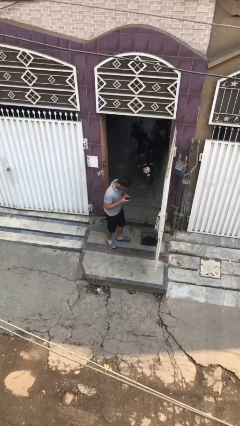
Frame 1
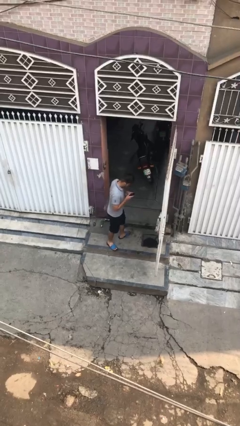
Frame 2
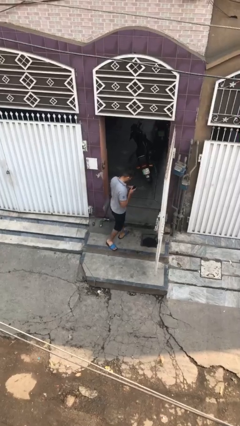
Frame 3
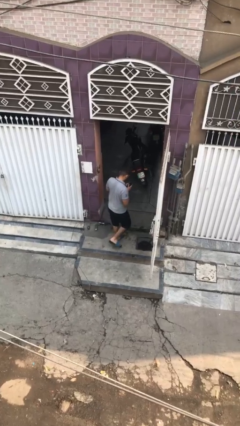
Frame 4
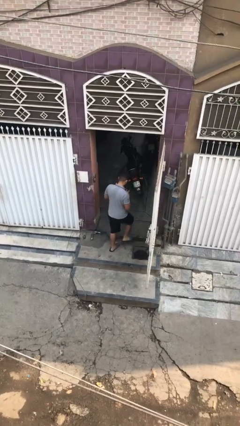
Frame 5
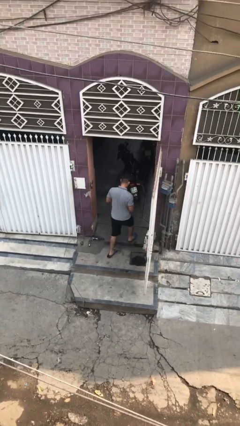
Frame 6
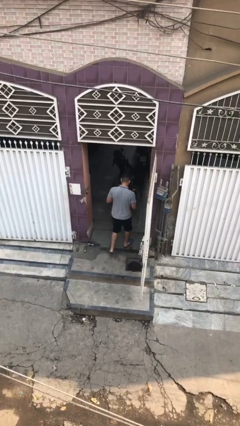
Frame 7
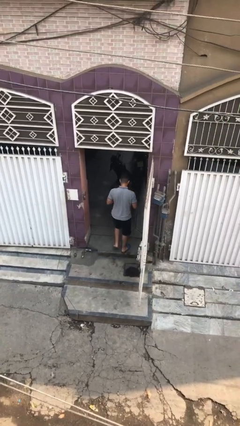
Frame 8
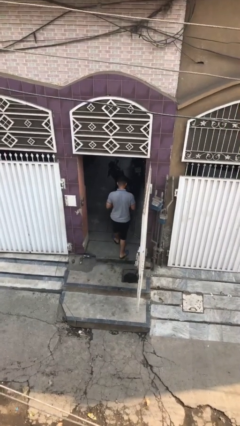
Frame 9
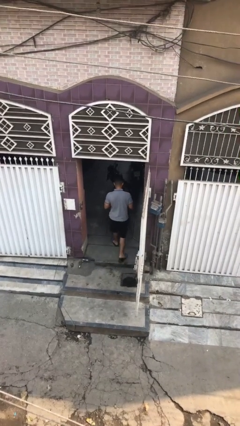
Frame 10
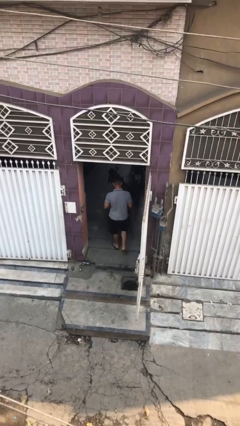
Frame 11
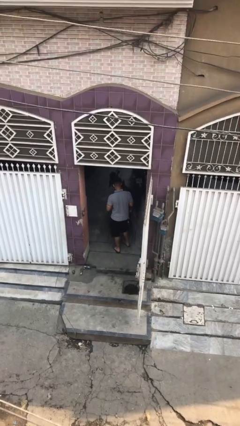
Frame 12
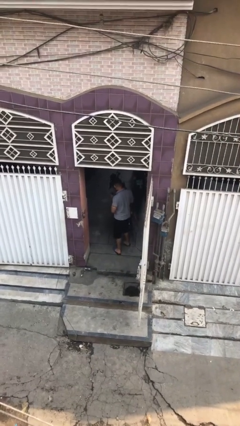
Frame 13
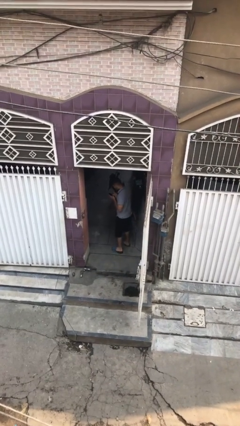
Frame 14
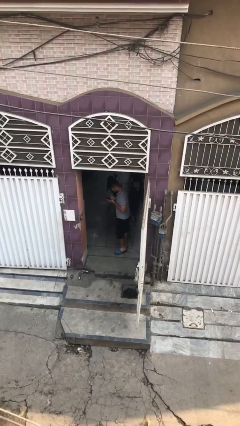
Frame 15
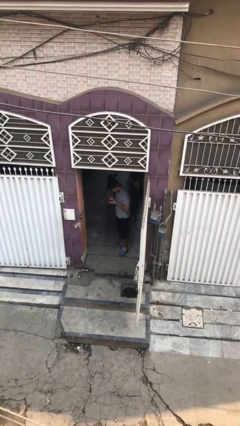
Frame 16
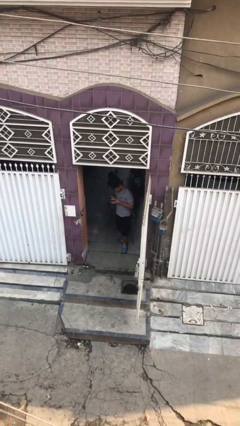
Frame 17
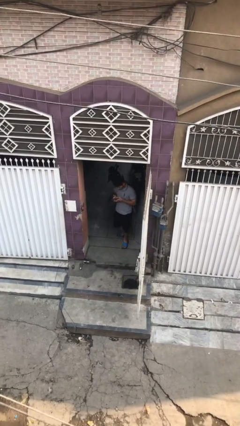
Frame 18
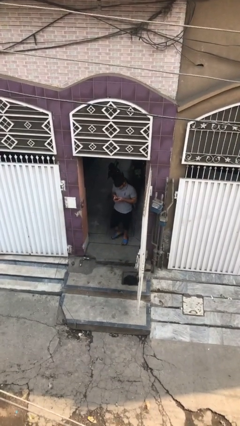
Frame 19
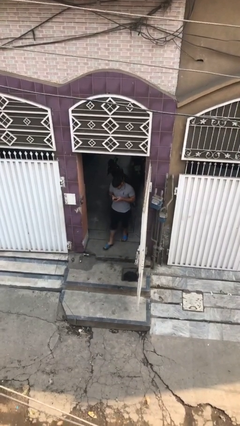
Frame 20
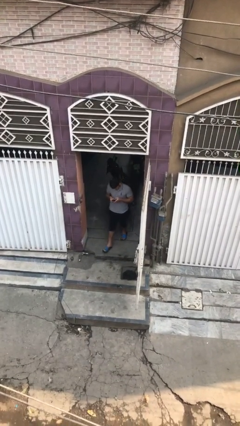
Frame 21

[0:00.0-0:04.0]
person exits scene through structure

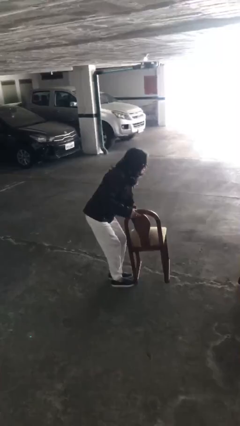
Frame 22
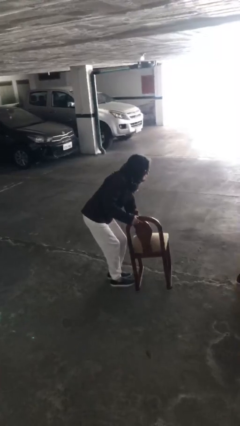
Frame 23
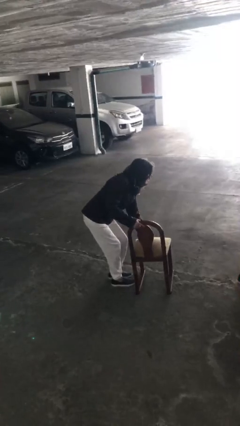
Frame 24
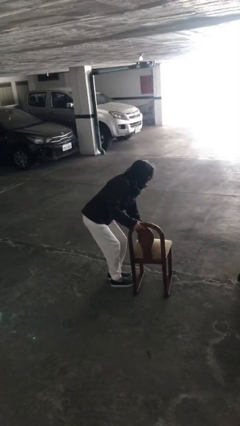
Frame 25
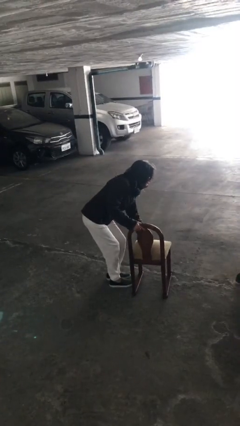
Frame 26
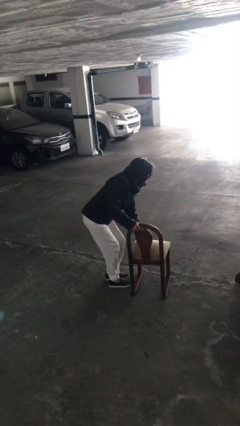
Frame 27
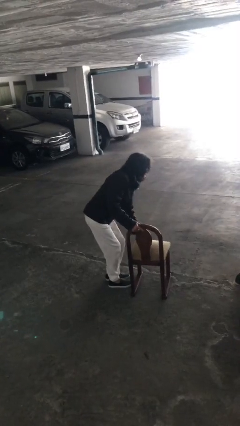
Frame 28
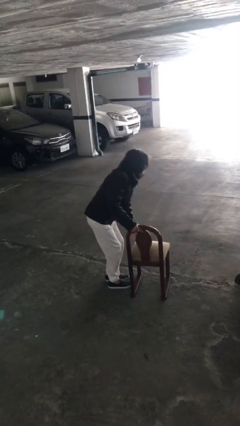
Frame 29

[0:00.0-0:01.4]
person puts down object on floor

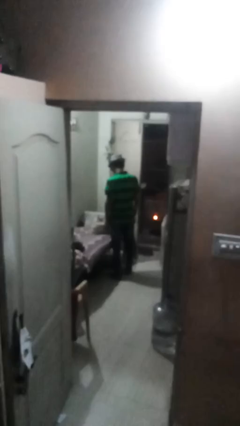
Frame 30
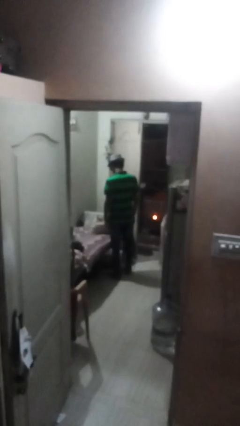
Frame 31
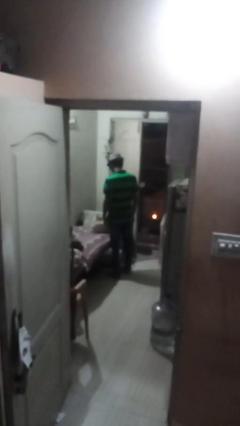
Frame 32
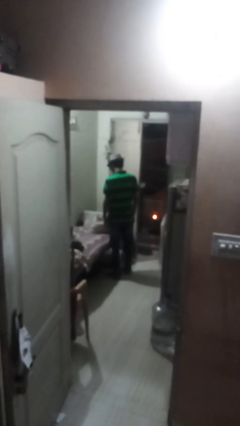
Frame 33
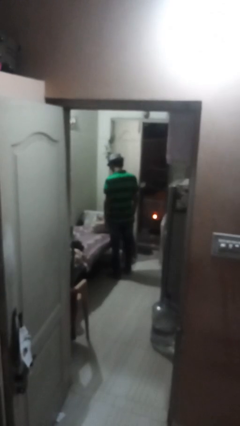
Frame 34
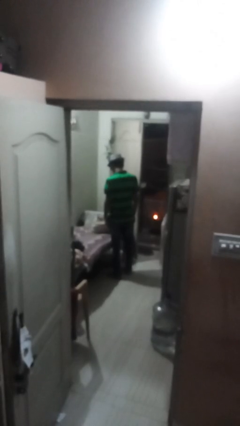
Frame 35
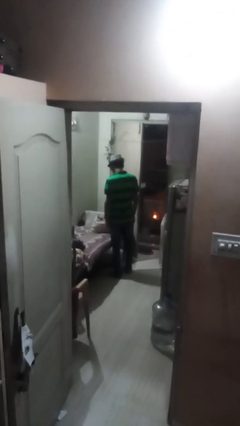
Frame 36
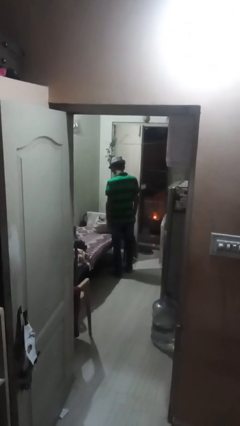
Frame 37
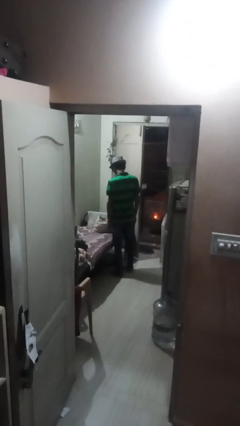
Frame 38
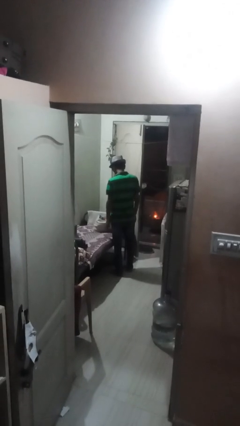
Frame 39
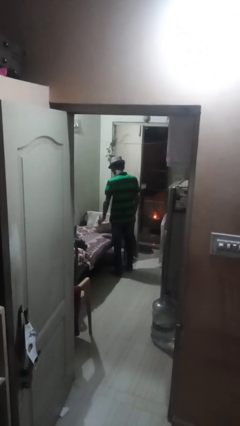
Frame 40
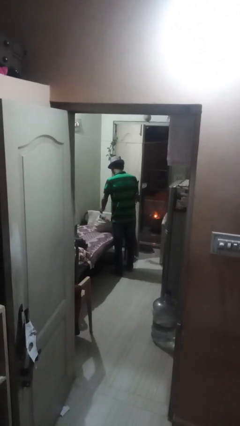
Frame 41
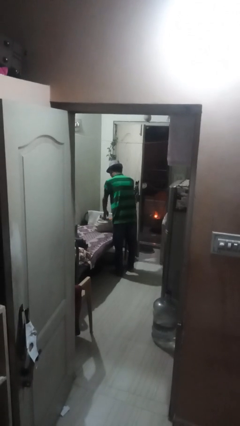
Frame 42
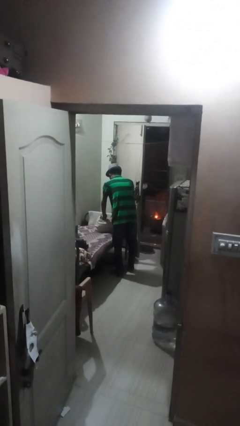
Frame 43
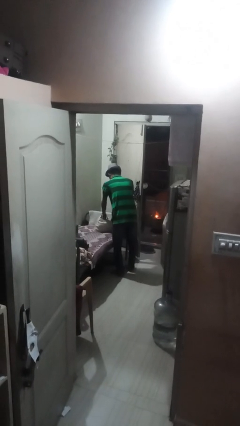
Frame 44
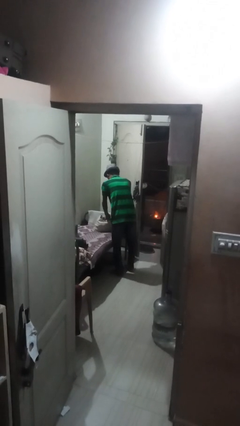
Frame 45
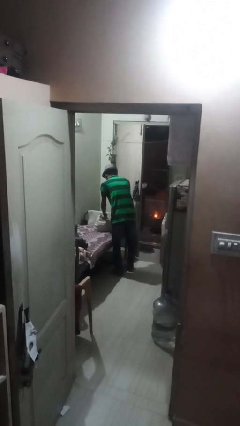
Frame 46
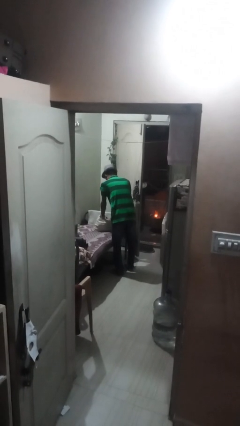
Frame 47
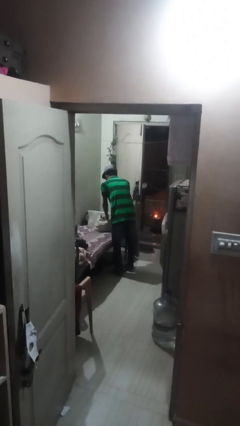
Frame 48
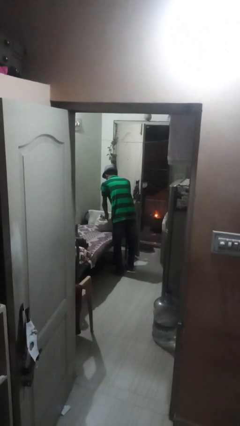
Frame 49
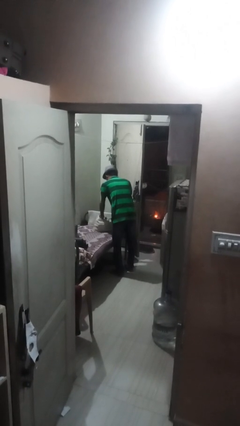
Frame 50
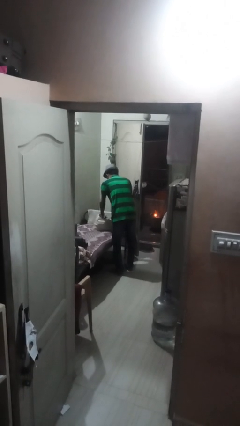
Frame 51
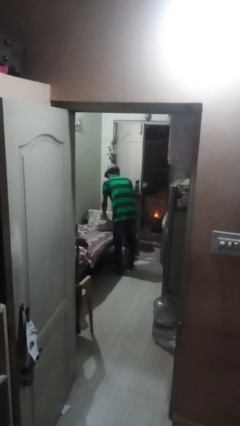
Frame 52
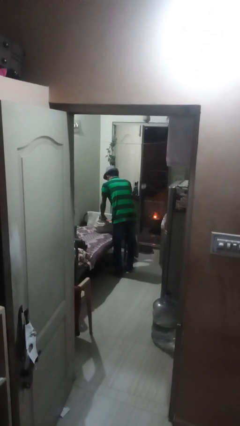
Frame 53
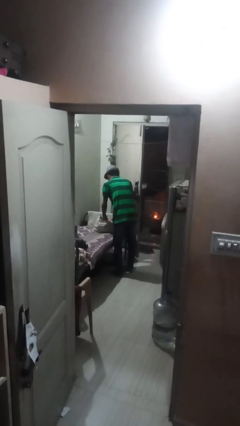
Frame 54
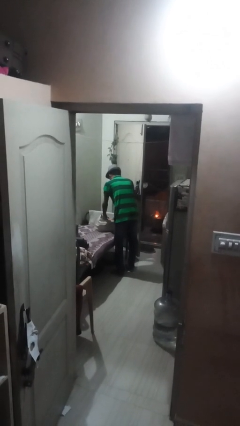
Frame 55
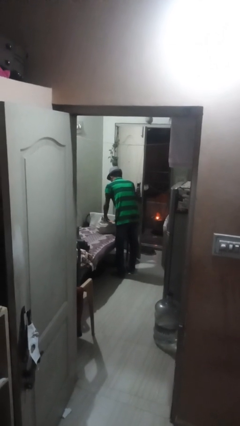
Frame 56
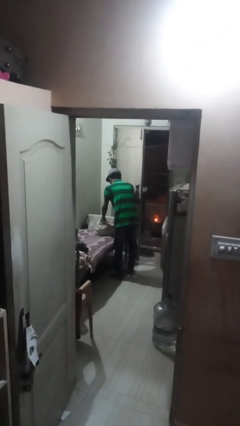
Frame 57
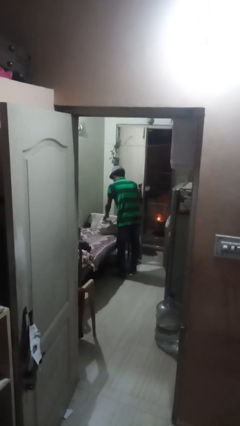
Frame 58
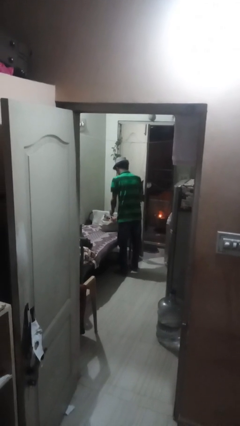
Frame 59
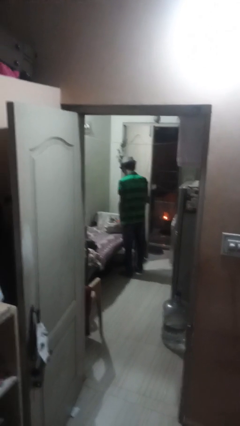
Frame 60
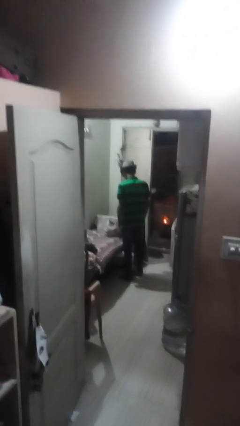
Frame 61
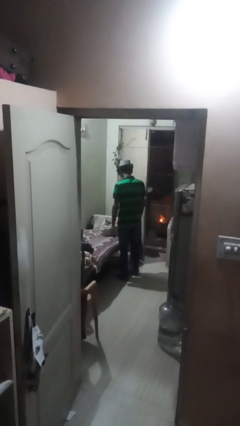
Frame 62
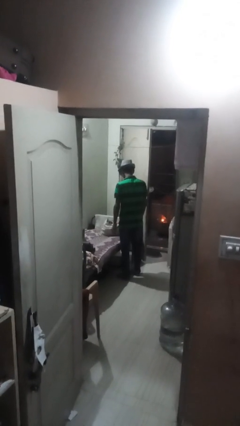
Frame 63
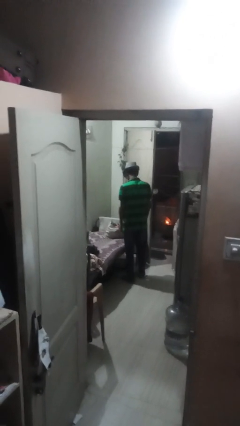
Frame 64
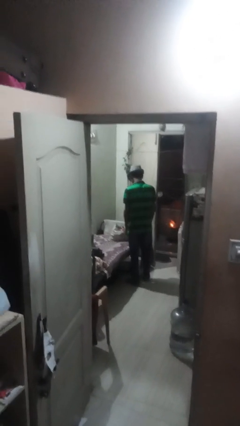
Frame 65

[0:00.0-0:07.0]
person searches in bag

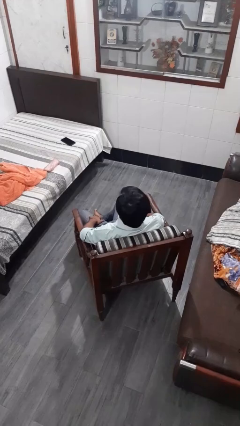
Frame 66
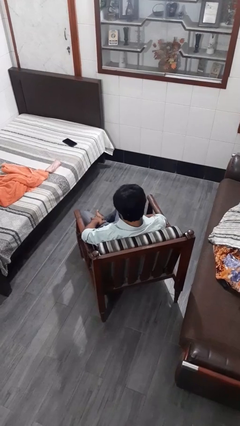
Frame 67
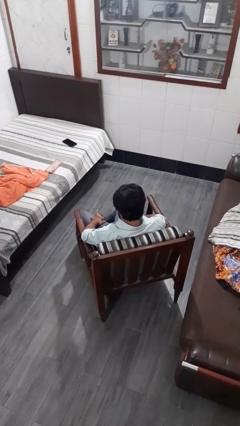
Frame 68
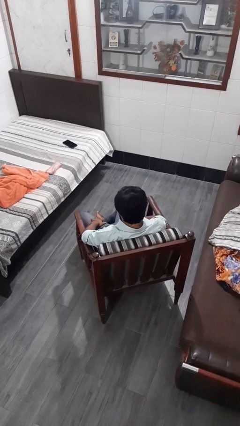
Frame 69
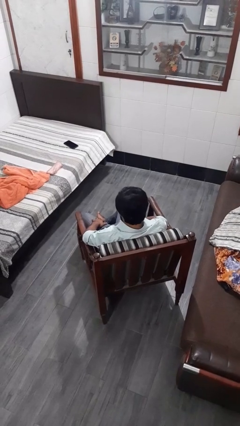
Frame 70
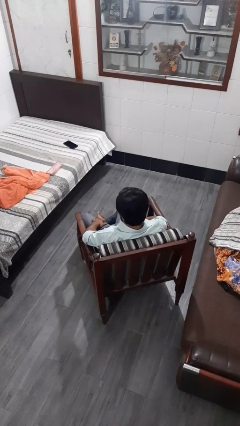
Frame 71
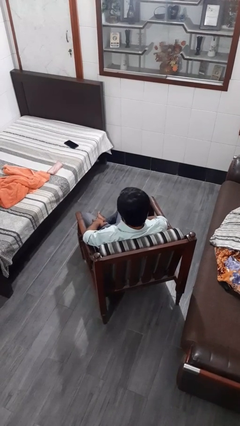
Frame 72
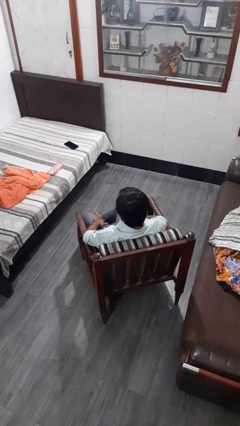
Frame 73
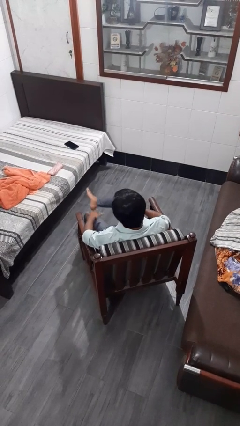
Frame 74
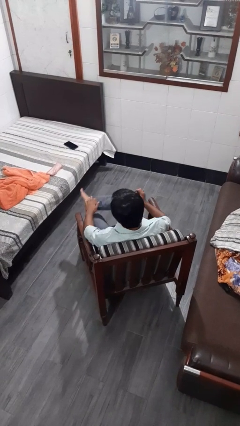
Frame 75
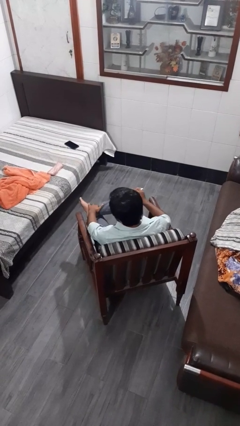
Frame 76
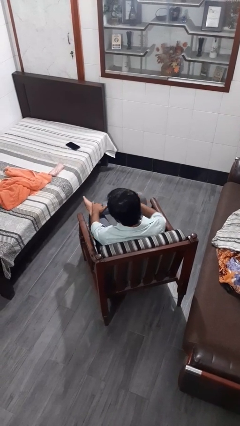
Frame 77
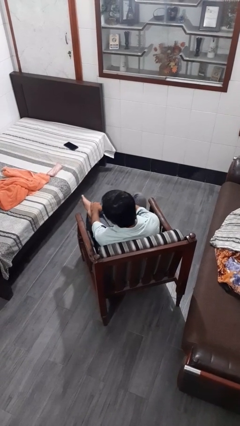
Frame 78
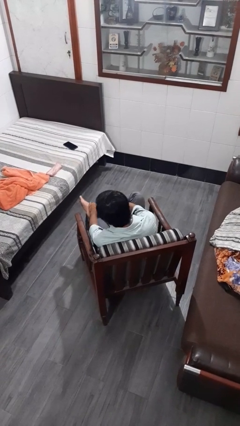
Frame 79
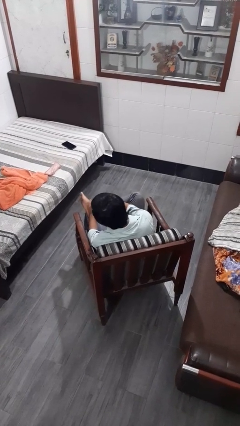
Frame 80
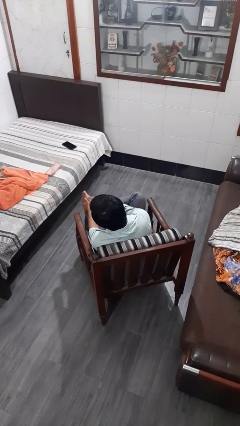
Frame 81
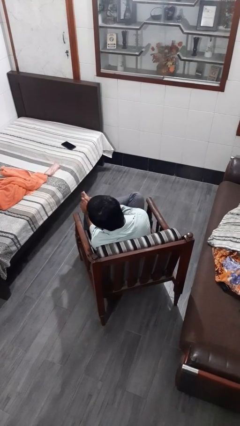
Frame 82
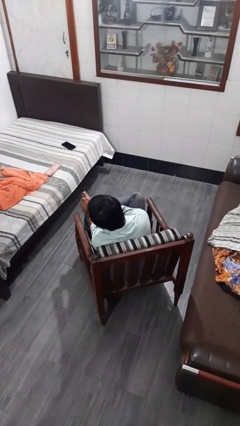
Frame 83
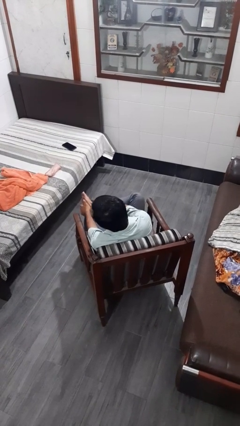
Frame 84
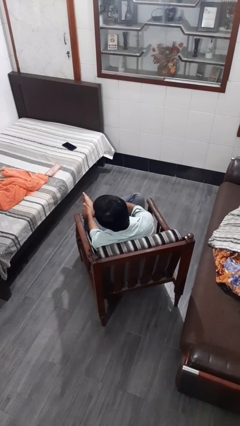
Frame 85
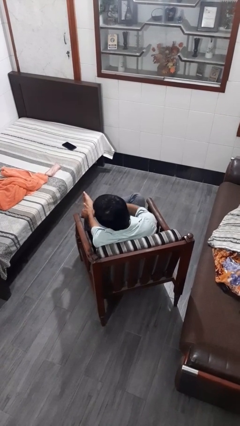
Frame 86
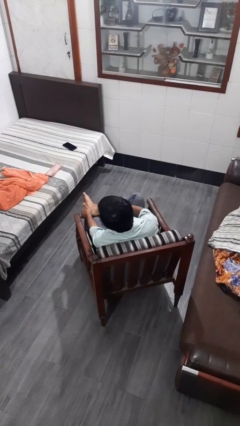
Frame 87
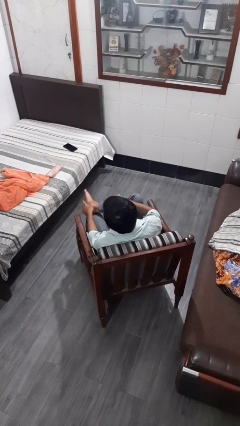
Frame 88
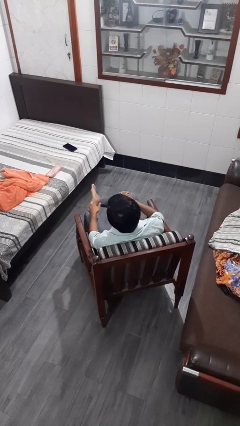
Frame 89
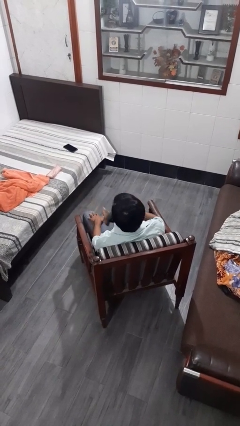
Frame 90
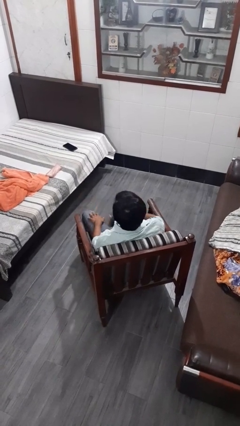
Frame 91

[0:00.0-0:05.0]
person rubs foot

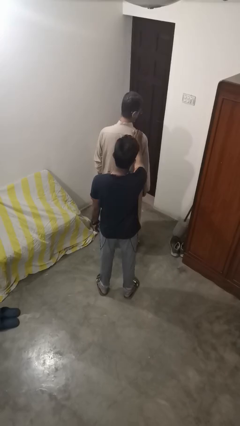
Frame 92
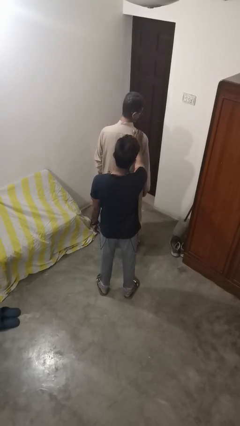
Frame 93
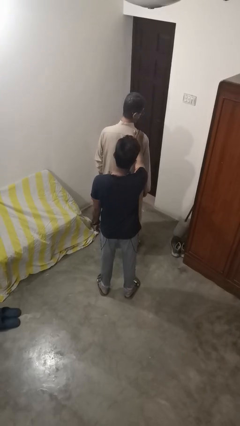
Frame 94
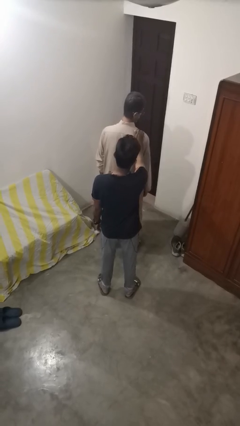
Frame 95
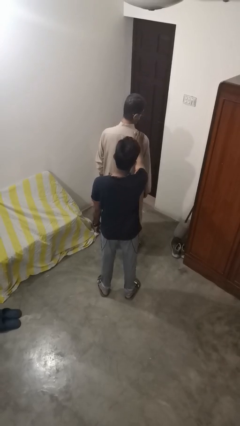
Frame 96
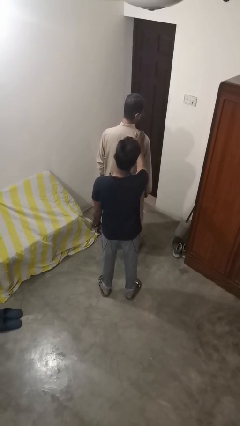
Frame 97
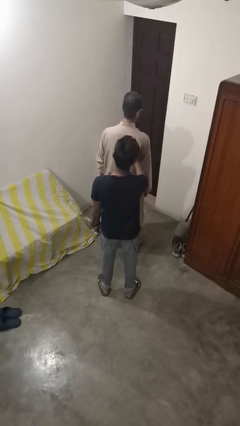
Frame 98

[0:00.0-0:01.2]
person spins person around
